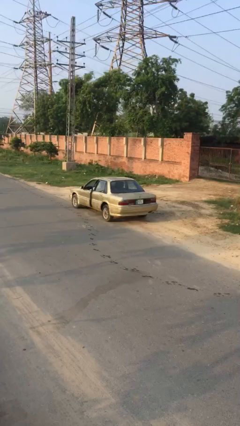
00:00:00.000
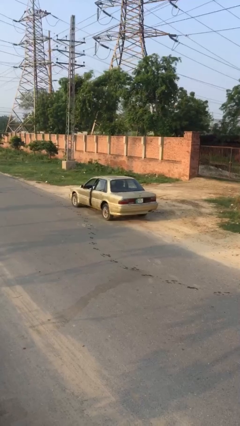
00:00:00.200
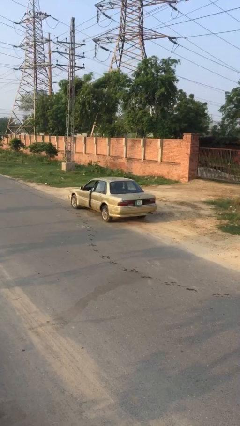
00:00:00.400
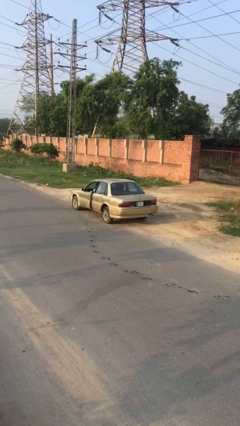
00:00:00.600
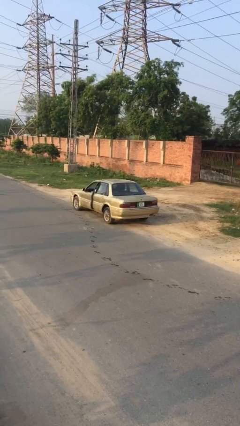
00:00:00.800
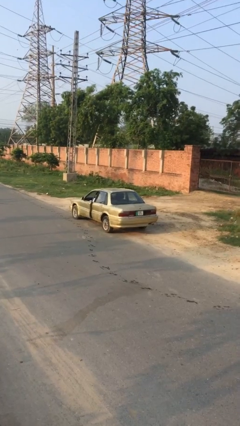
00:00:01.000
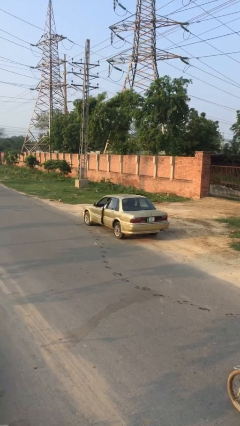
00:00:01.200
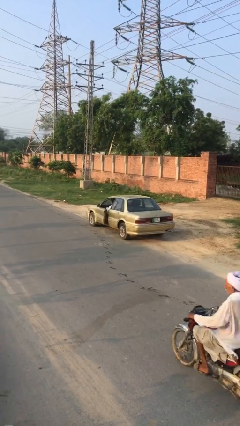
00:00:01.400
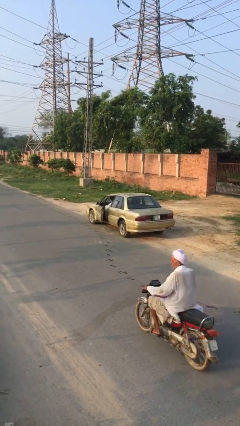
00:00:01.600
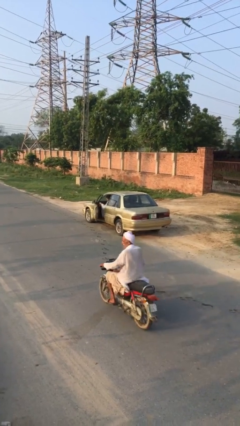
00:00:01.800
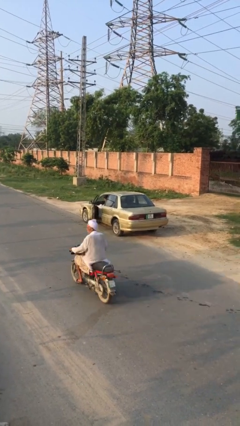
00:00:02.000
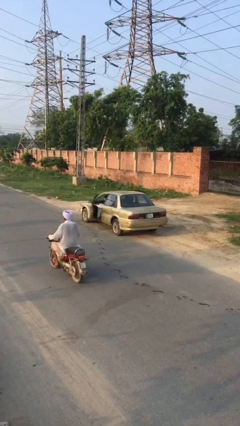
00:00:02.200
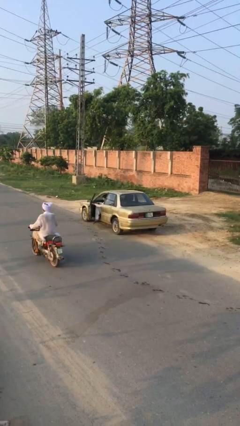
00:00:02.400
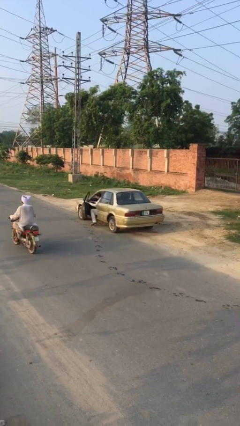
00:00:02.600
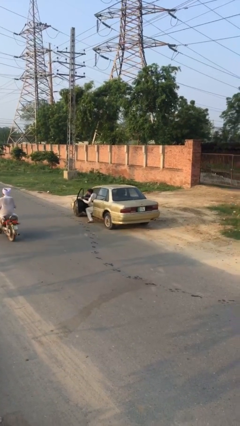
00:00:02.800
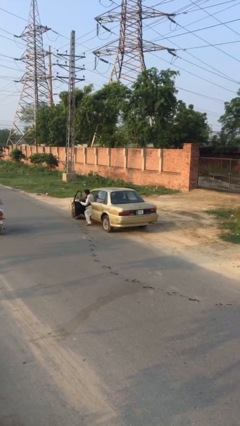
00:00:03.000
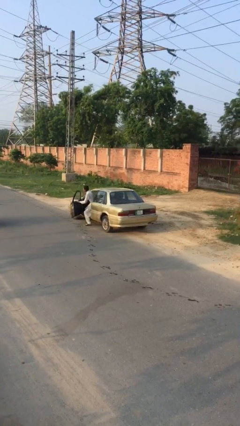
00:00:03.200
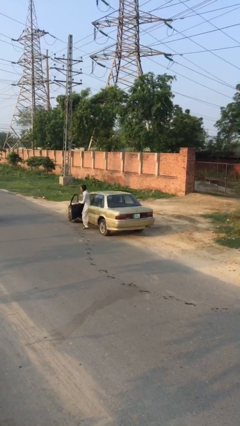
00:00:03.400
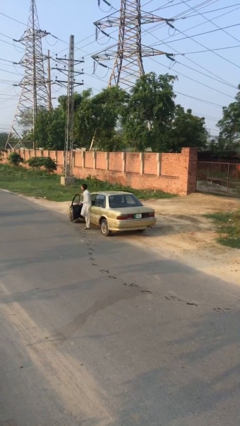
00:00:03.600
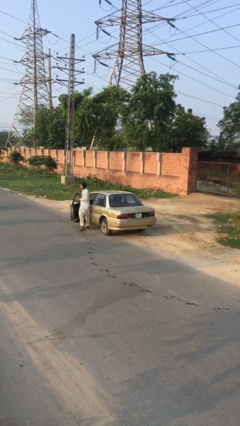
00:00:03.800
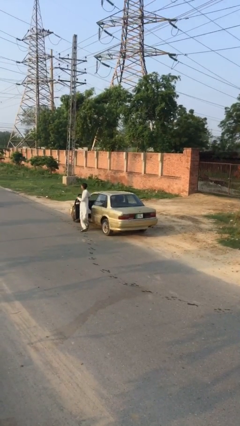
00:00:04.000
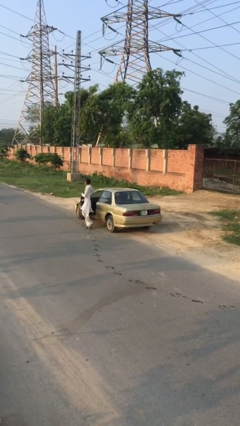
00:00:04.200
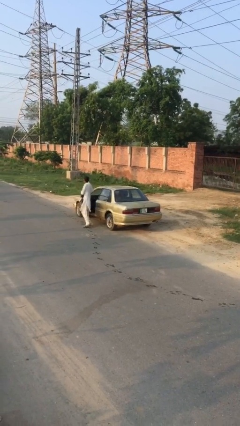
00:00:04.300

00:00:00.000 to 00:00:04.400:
car drops off person

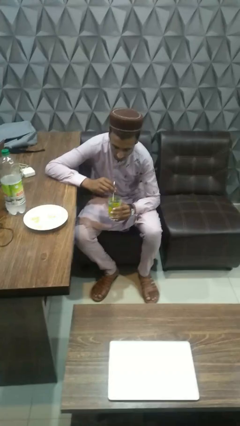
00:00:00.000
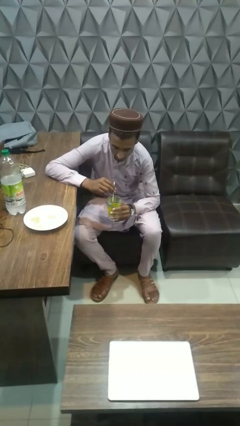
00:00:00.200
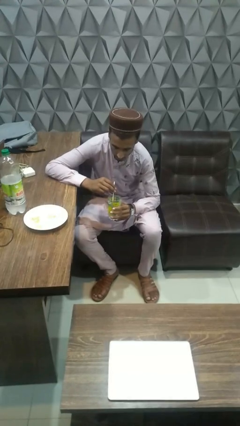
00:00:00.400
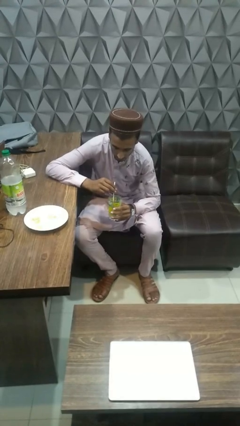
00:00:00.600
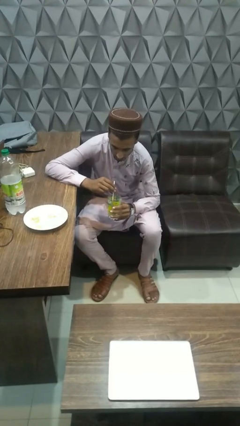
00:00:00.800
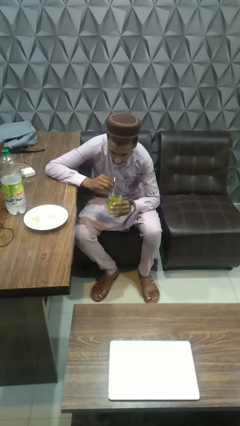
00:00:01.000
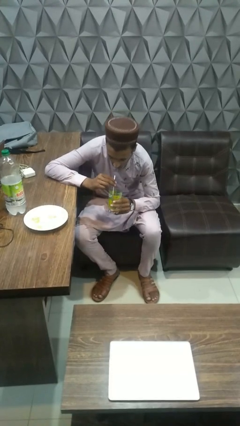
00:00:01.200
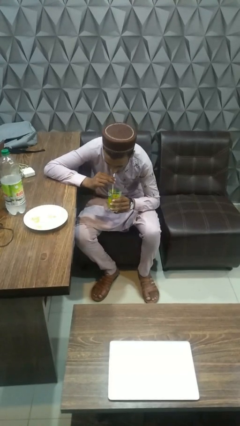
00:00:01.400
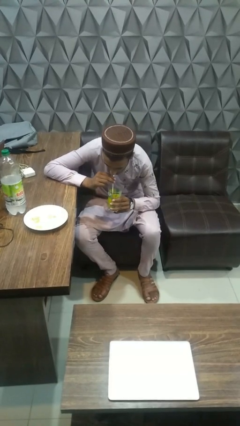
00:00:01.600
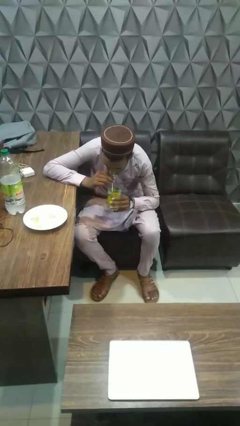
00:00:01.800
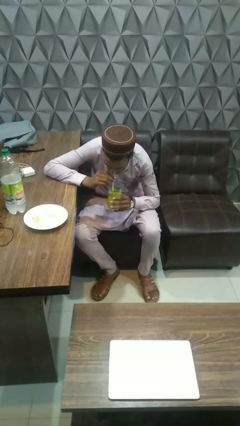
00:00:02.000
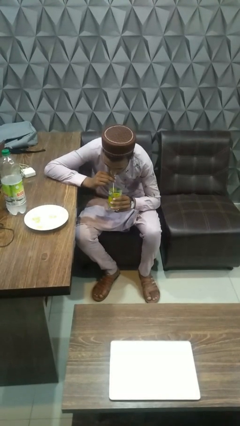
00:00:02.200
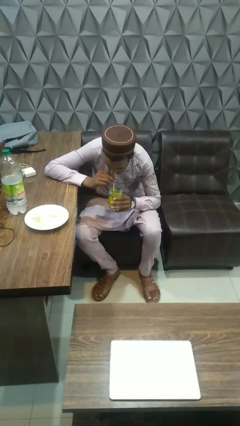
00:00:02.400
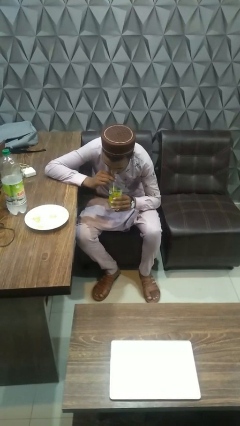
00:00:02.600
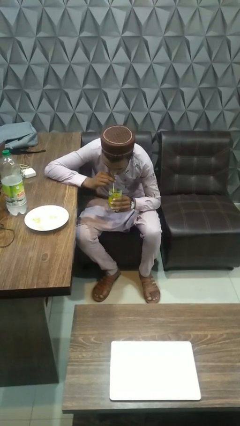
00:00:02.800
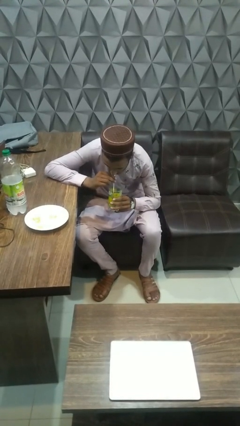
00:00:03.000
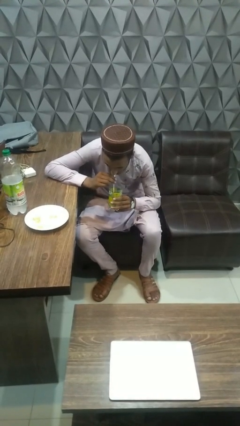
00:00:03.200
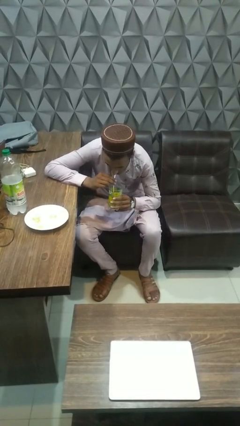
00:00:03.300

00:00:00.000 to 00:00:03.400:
person drinks from straw

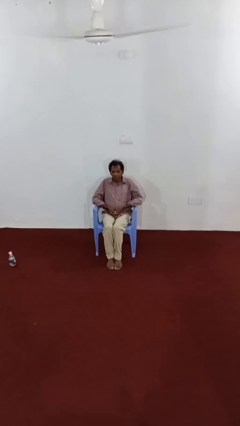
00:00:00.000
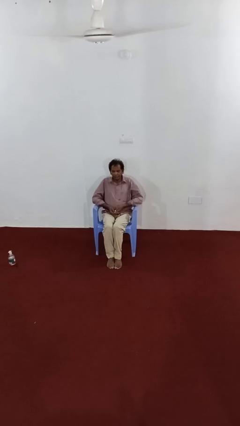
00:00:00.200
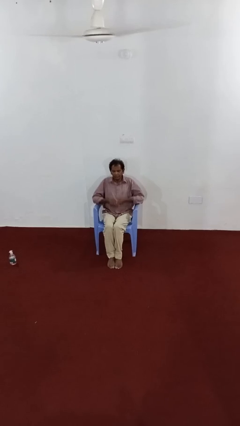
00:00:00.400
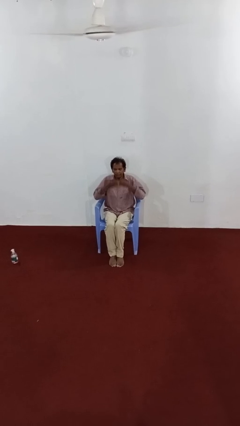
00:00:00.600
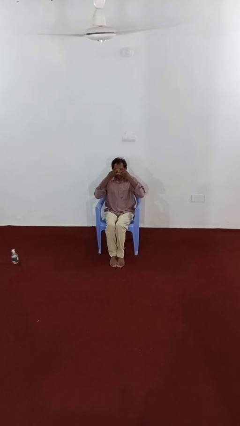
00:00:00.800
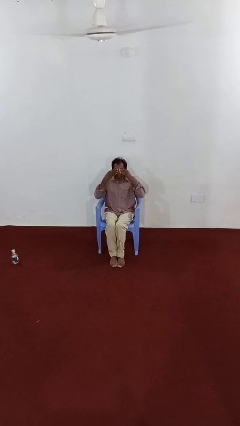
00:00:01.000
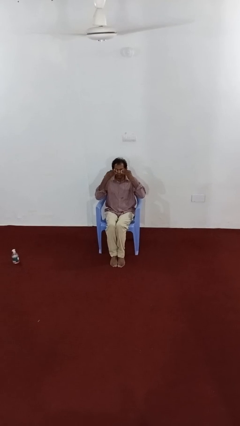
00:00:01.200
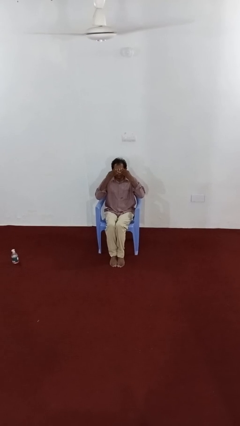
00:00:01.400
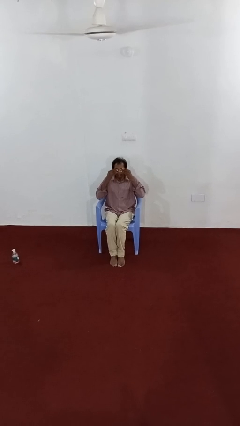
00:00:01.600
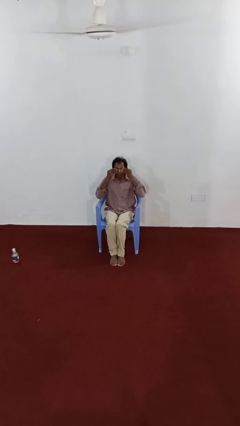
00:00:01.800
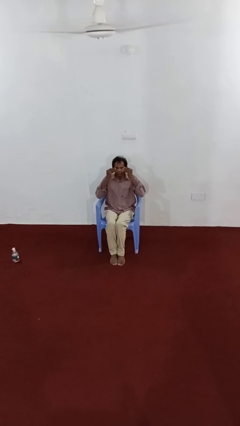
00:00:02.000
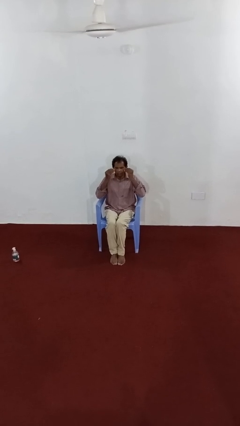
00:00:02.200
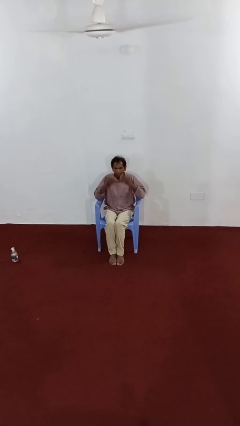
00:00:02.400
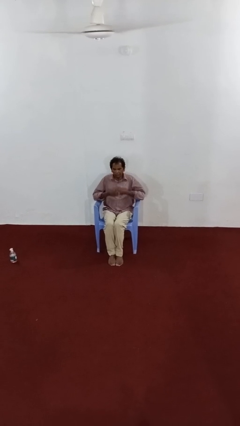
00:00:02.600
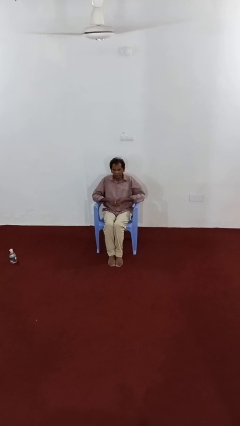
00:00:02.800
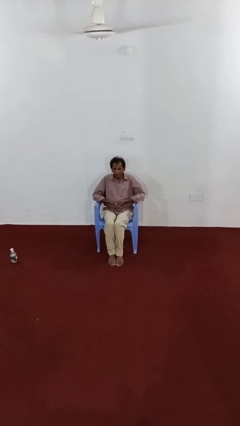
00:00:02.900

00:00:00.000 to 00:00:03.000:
person rubs eyes

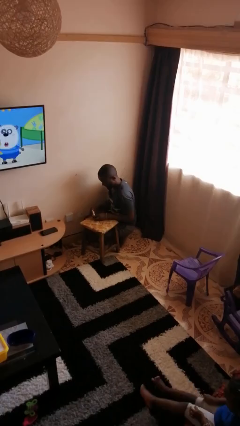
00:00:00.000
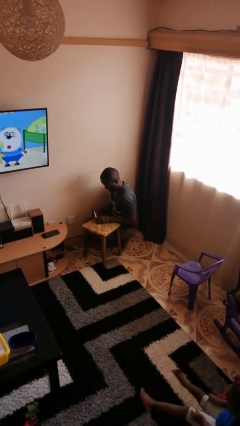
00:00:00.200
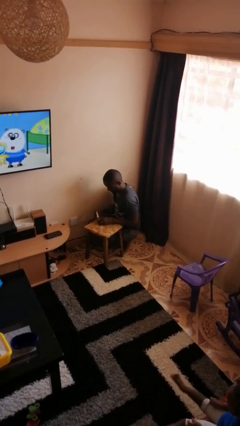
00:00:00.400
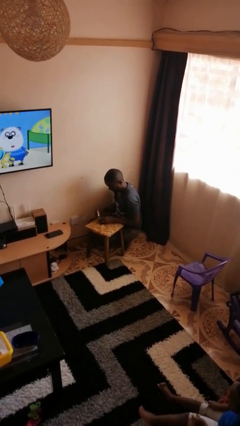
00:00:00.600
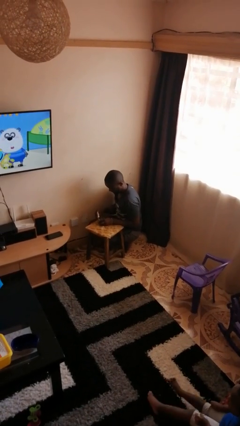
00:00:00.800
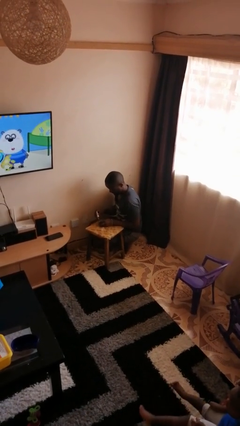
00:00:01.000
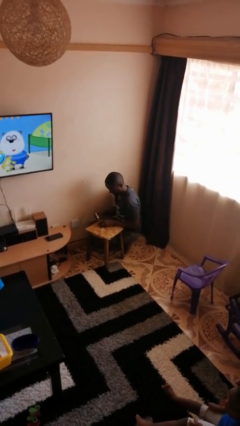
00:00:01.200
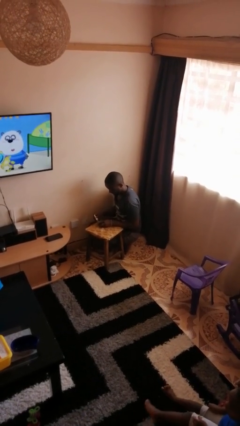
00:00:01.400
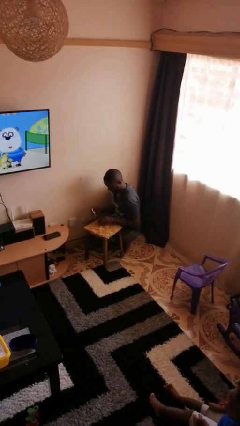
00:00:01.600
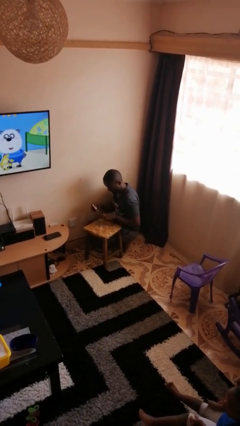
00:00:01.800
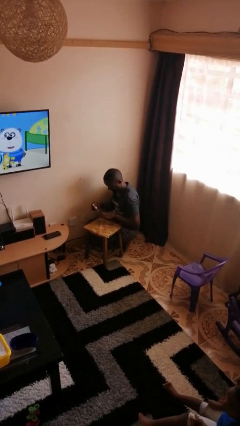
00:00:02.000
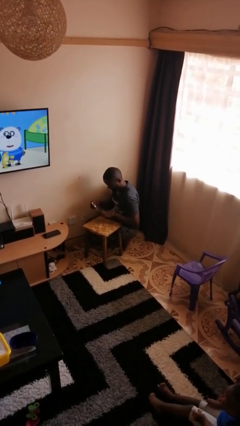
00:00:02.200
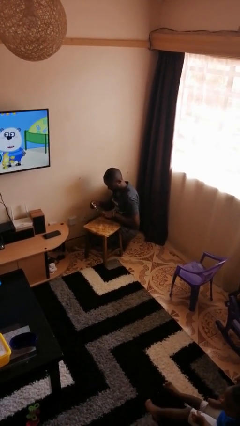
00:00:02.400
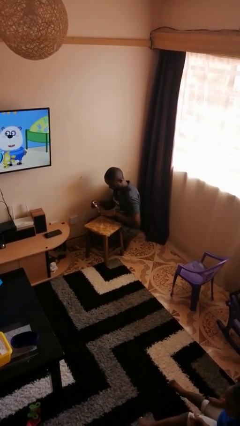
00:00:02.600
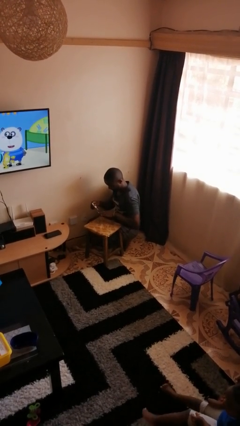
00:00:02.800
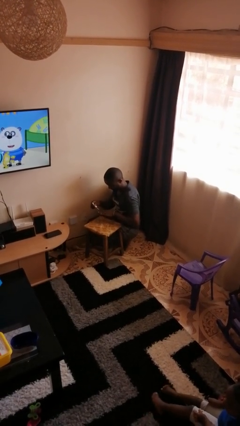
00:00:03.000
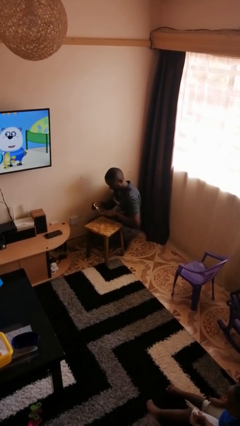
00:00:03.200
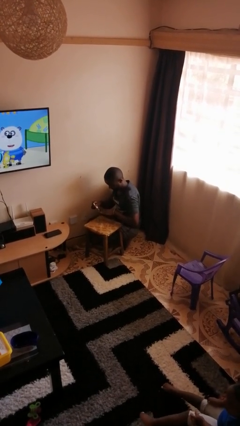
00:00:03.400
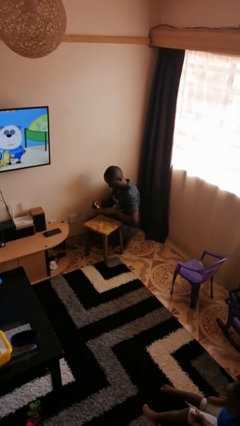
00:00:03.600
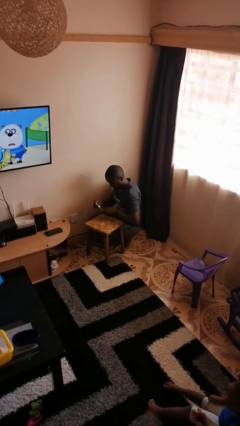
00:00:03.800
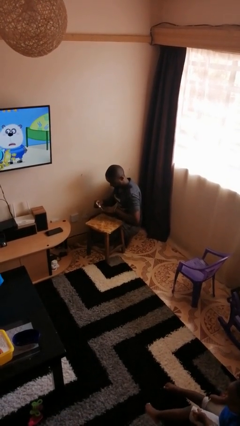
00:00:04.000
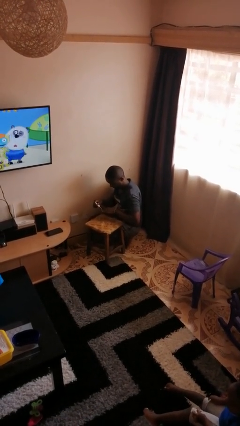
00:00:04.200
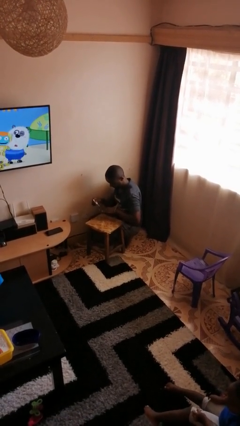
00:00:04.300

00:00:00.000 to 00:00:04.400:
person paints fingernails

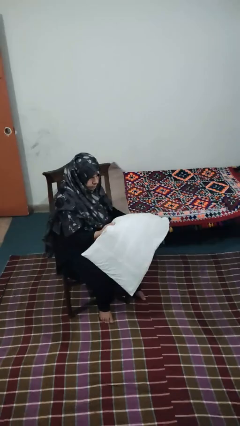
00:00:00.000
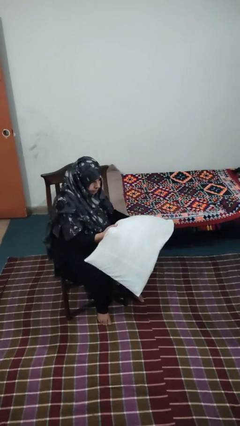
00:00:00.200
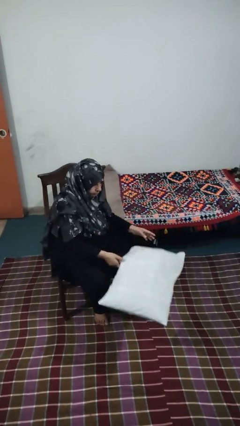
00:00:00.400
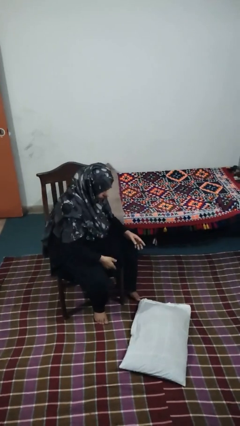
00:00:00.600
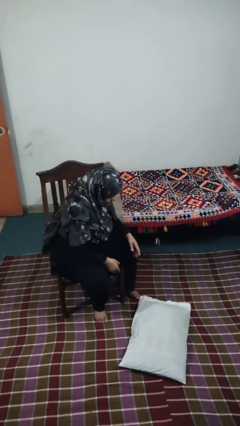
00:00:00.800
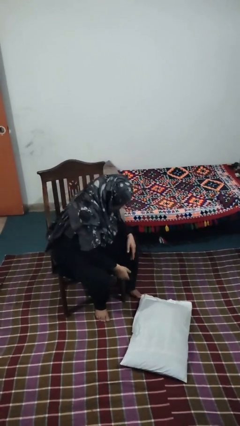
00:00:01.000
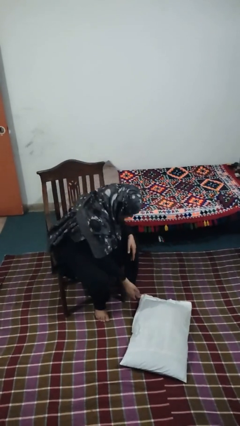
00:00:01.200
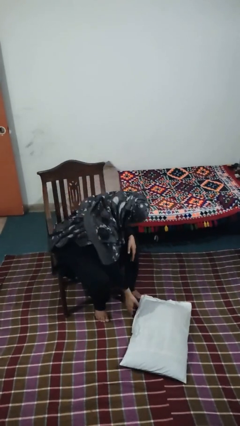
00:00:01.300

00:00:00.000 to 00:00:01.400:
person drops object

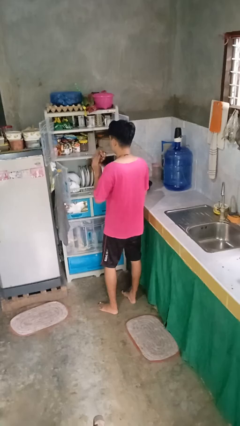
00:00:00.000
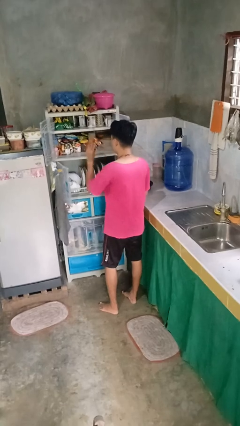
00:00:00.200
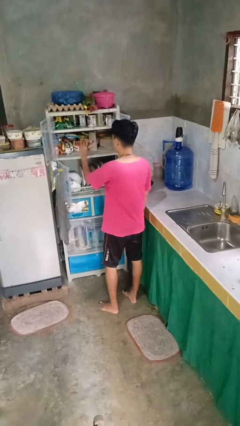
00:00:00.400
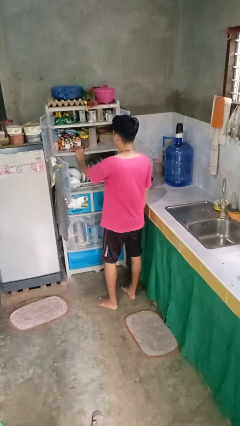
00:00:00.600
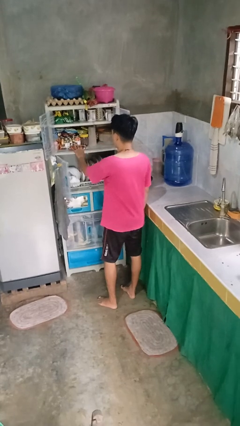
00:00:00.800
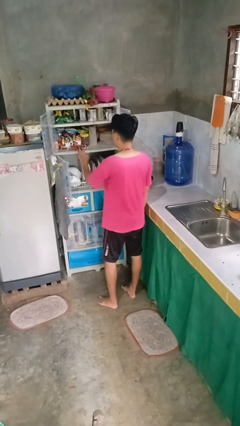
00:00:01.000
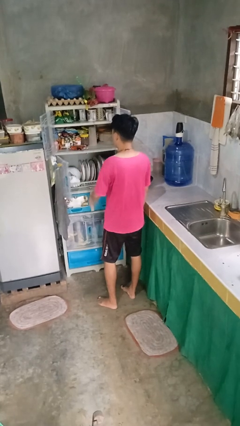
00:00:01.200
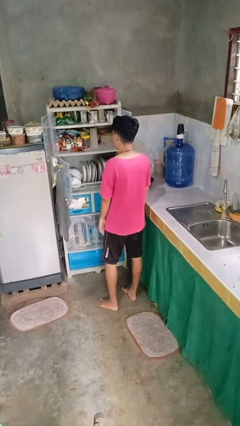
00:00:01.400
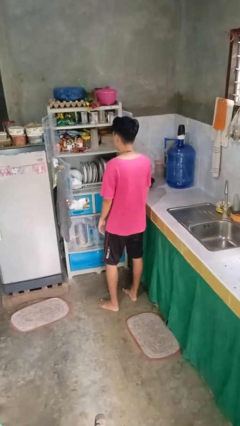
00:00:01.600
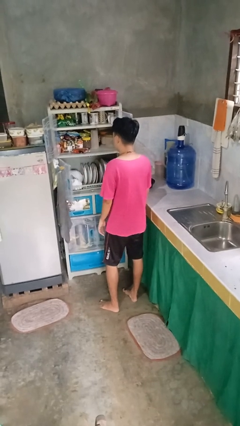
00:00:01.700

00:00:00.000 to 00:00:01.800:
person puts object in cabinet
